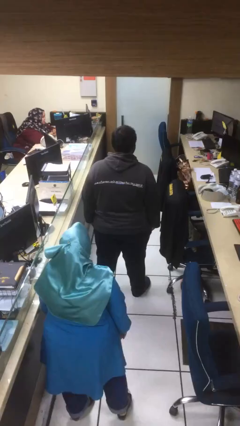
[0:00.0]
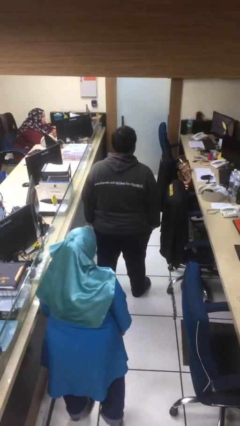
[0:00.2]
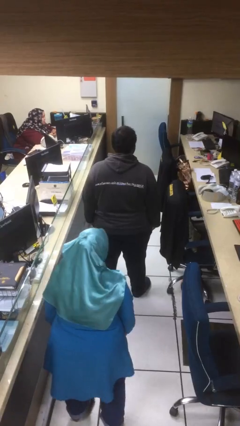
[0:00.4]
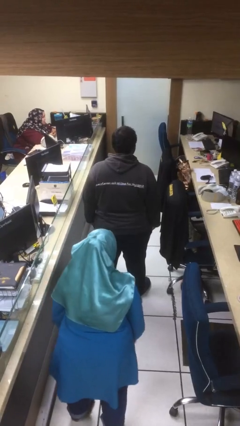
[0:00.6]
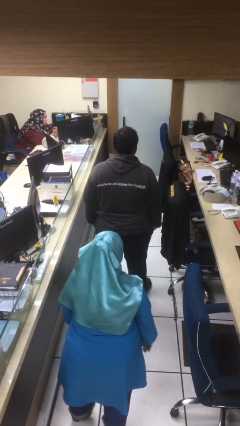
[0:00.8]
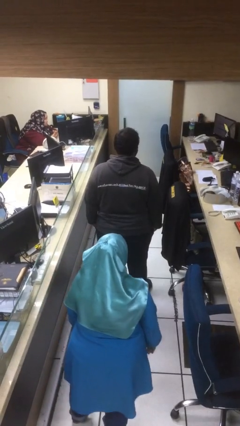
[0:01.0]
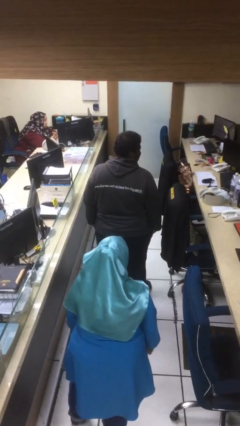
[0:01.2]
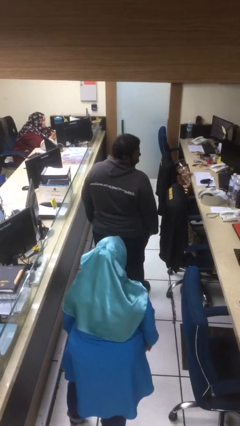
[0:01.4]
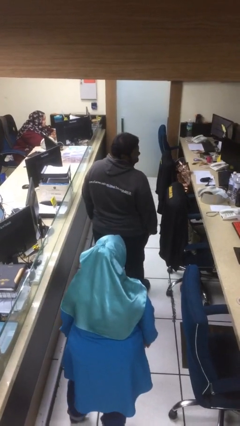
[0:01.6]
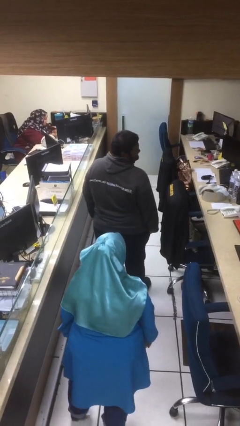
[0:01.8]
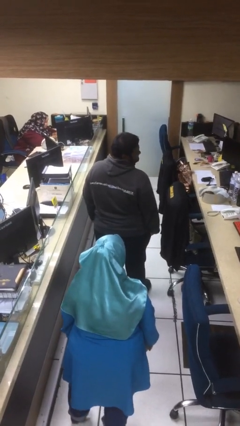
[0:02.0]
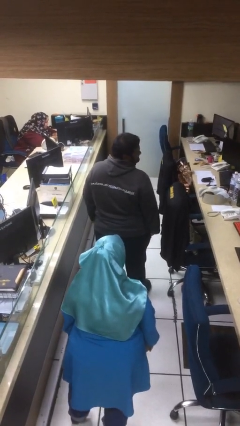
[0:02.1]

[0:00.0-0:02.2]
person looks over shoulder

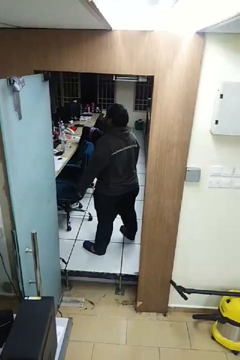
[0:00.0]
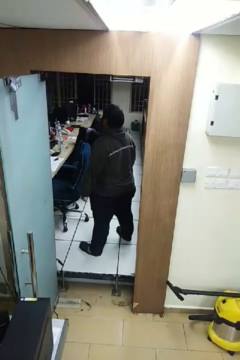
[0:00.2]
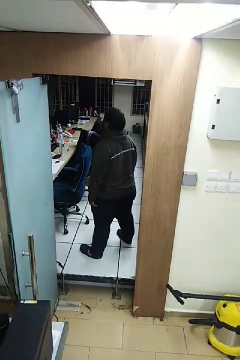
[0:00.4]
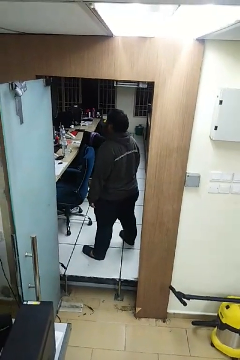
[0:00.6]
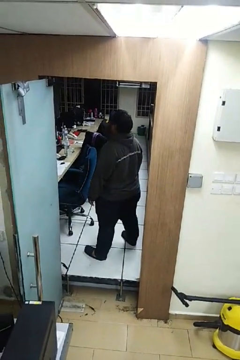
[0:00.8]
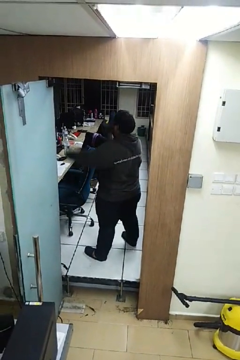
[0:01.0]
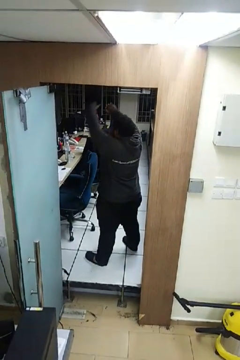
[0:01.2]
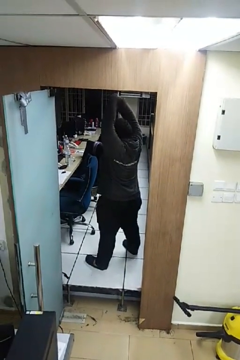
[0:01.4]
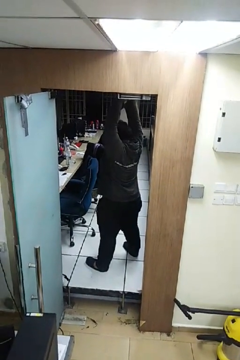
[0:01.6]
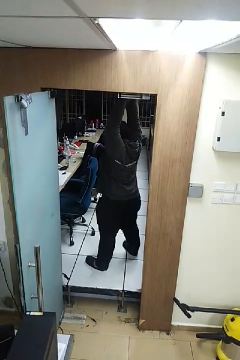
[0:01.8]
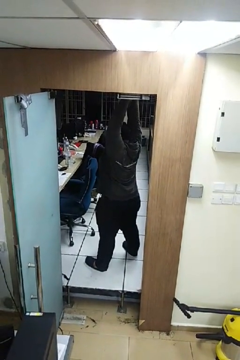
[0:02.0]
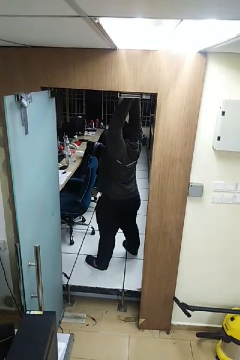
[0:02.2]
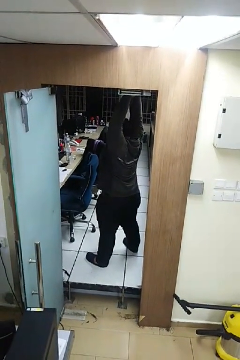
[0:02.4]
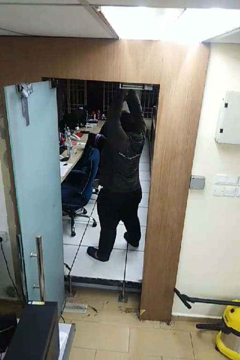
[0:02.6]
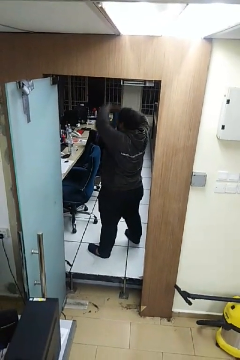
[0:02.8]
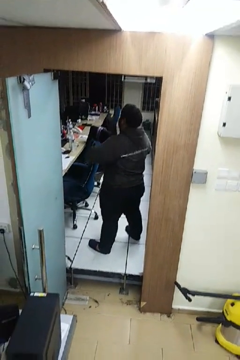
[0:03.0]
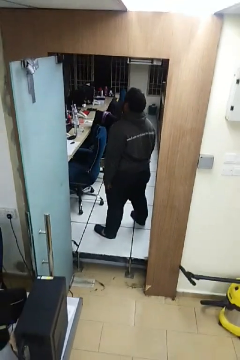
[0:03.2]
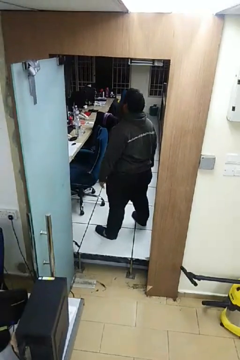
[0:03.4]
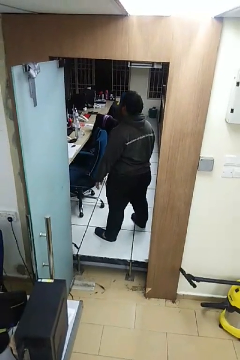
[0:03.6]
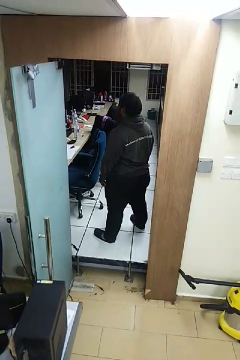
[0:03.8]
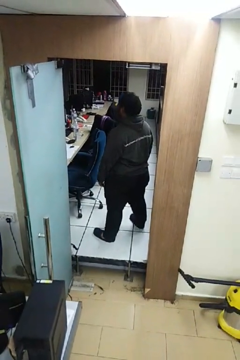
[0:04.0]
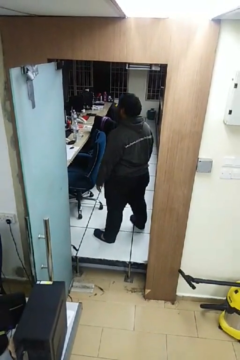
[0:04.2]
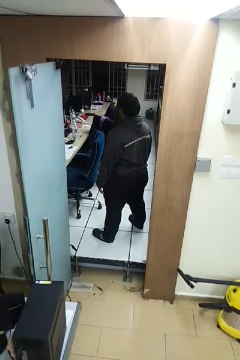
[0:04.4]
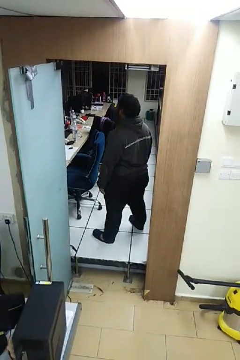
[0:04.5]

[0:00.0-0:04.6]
person stretches arms over head

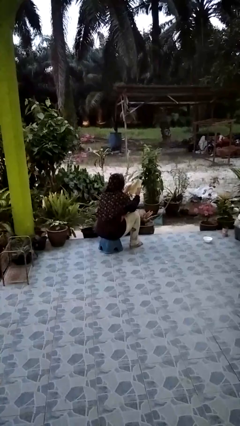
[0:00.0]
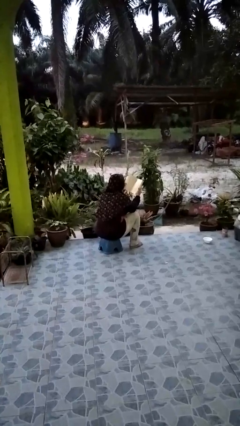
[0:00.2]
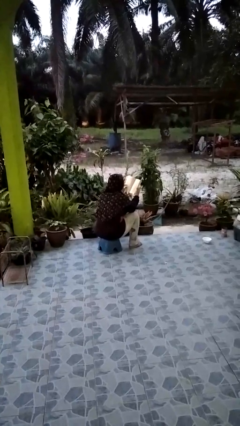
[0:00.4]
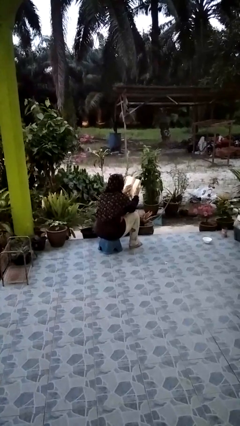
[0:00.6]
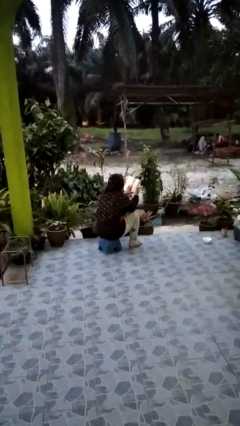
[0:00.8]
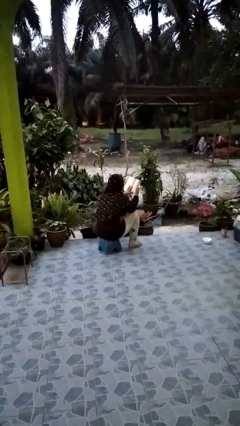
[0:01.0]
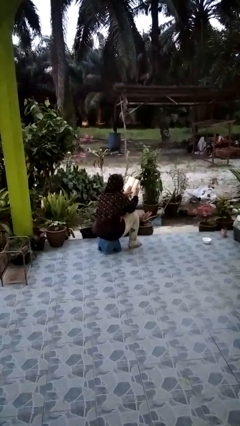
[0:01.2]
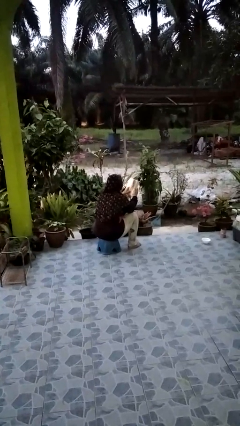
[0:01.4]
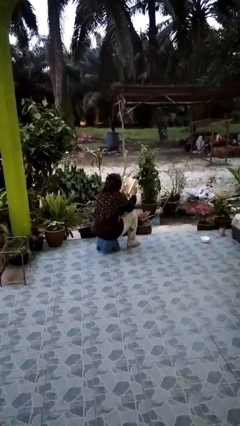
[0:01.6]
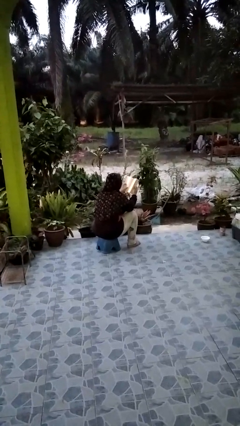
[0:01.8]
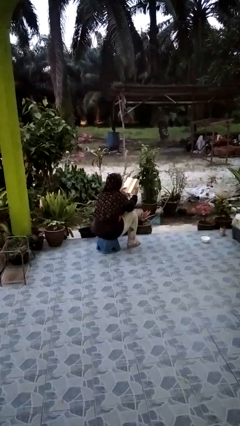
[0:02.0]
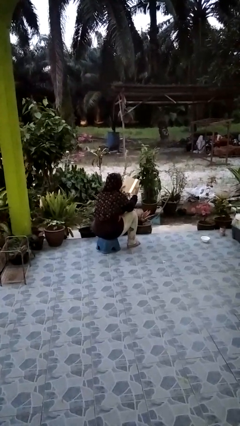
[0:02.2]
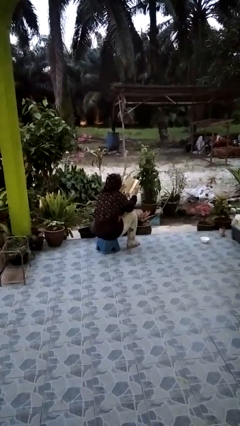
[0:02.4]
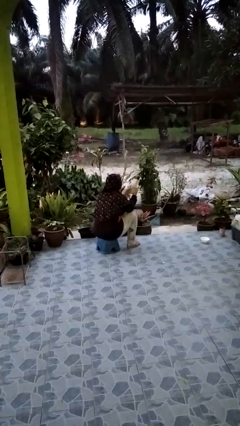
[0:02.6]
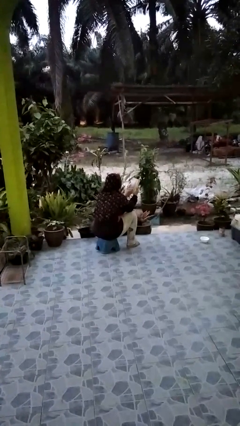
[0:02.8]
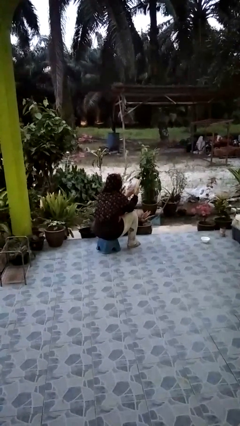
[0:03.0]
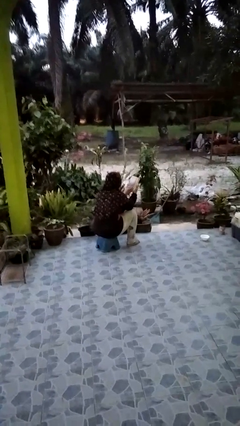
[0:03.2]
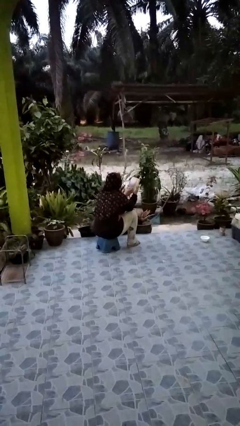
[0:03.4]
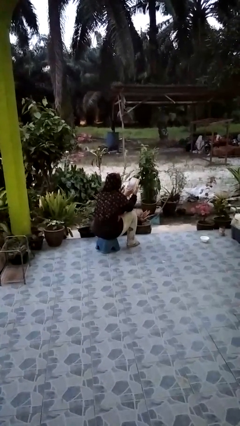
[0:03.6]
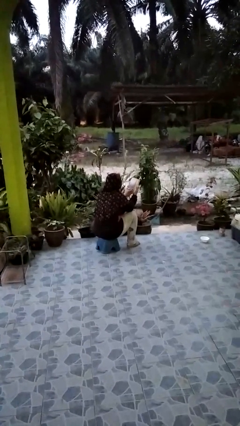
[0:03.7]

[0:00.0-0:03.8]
person reads book

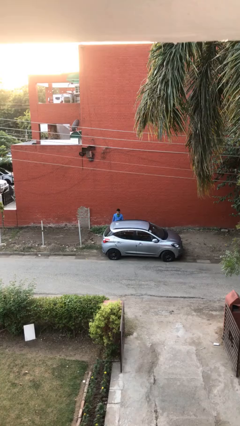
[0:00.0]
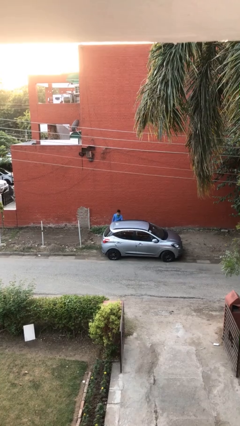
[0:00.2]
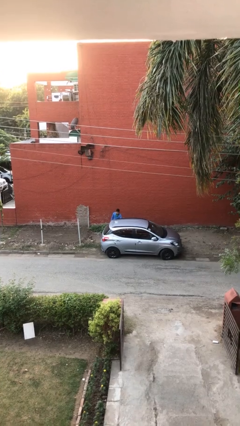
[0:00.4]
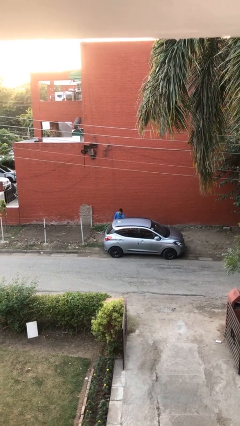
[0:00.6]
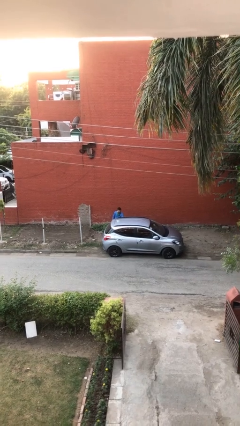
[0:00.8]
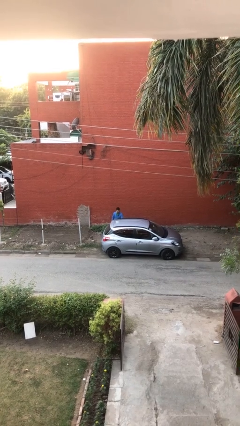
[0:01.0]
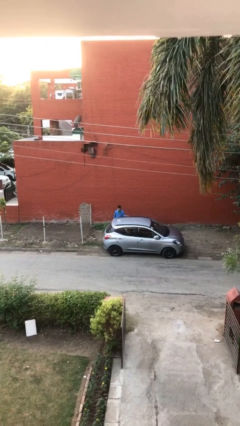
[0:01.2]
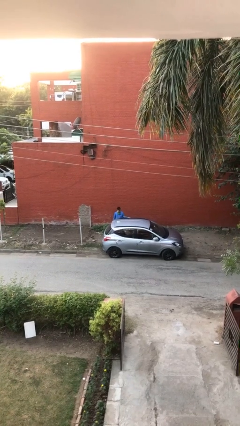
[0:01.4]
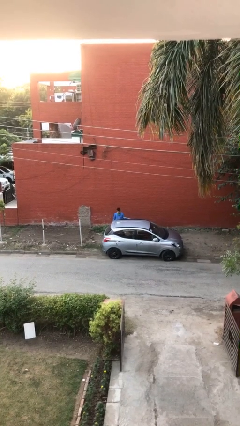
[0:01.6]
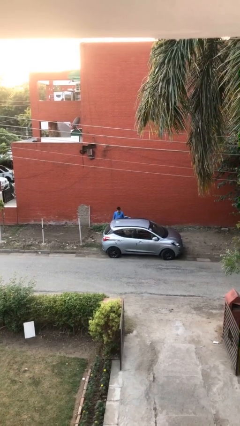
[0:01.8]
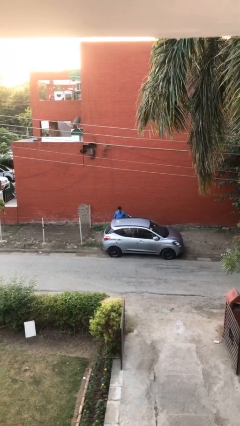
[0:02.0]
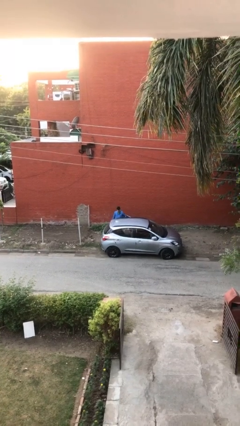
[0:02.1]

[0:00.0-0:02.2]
person opens car door

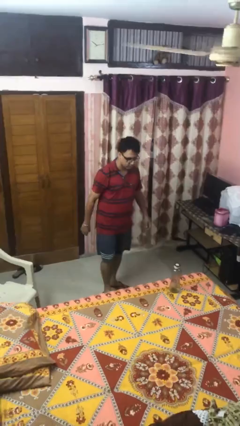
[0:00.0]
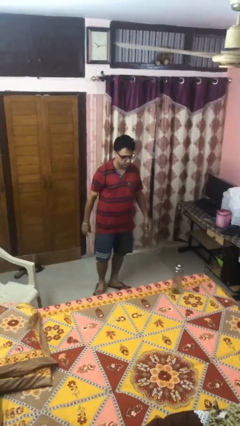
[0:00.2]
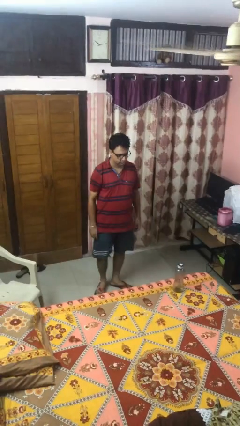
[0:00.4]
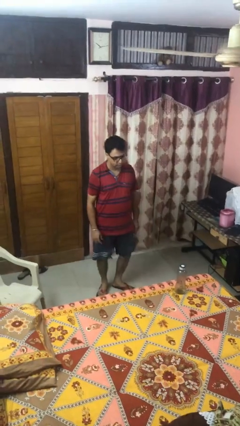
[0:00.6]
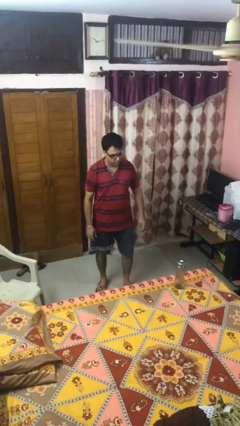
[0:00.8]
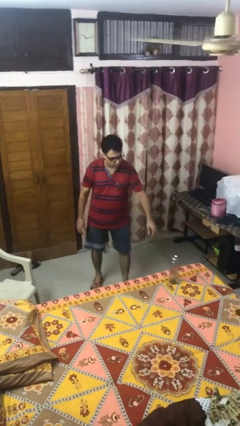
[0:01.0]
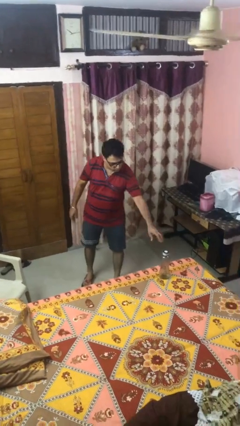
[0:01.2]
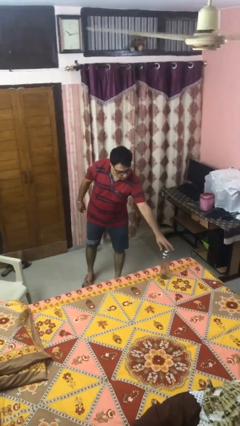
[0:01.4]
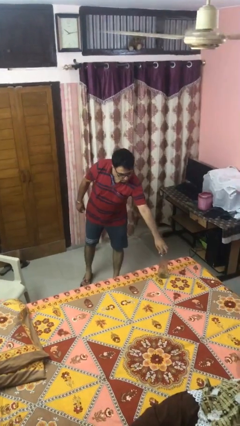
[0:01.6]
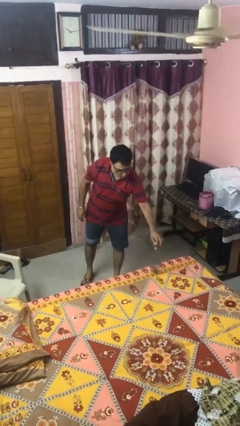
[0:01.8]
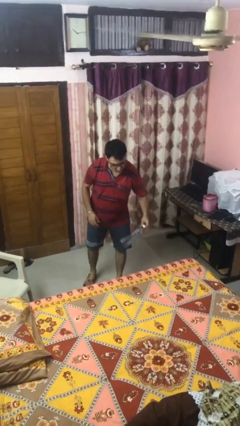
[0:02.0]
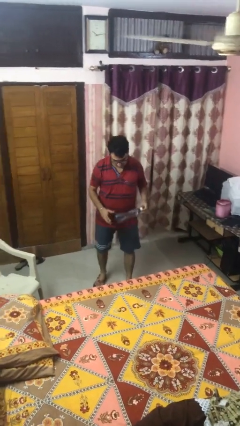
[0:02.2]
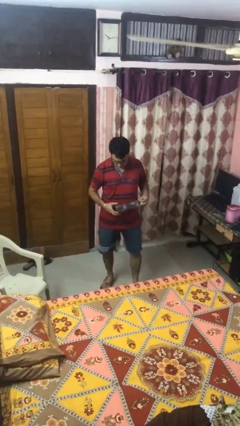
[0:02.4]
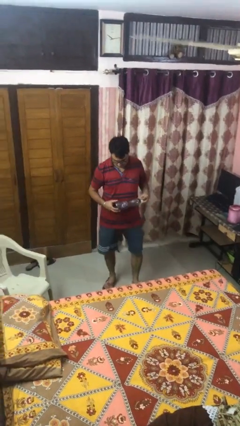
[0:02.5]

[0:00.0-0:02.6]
person picks up object from bed

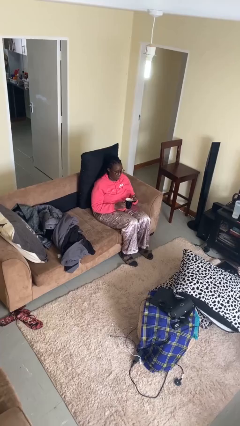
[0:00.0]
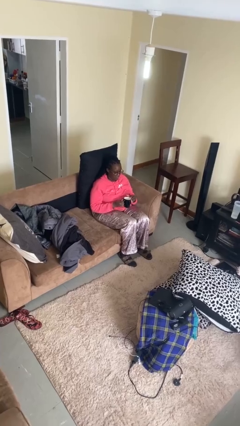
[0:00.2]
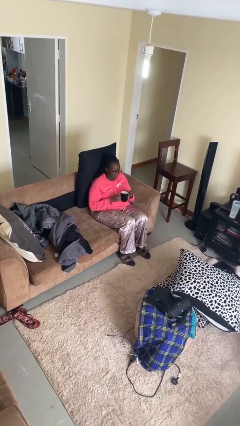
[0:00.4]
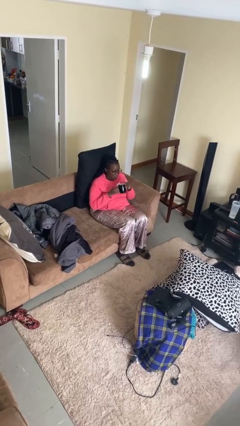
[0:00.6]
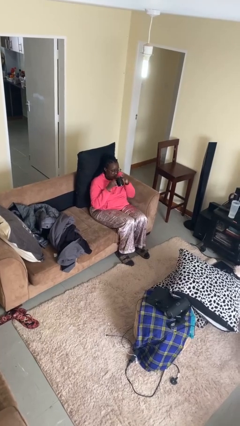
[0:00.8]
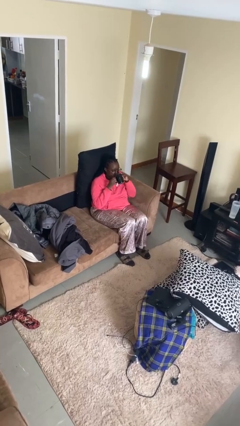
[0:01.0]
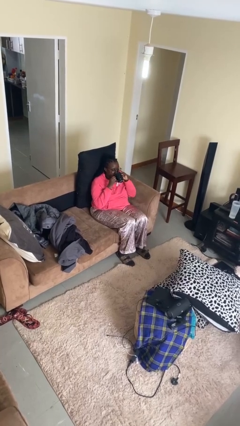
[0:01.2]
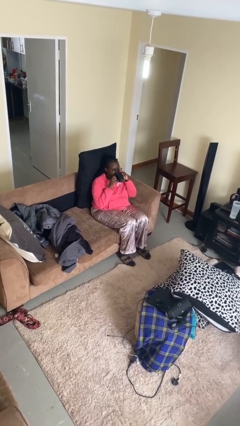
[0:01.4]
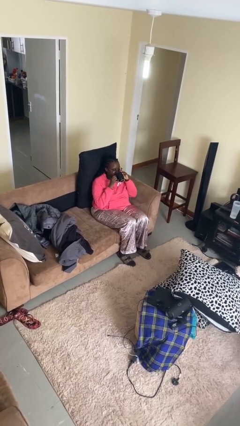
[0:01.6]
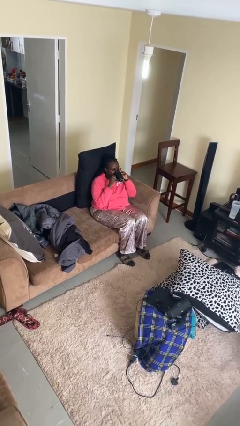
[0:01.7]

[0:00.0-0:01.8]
person drinks from mug
